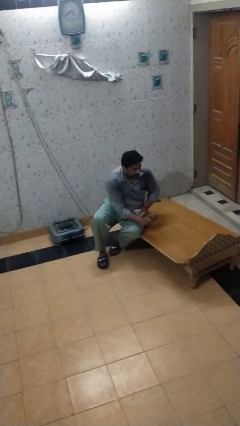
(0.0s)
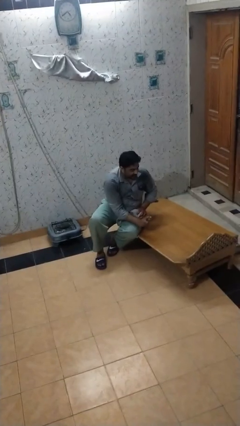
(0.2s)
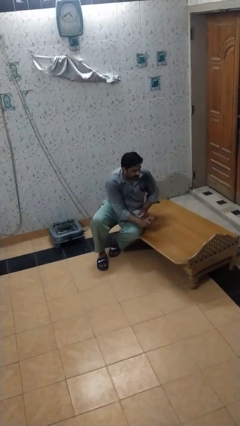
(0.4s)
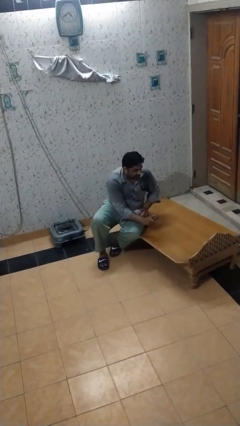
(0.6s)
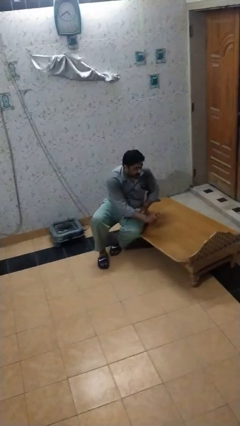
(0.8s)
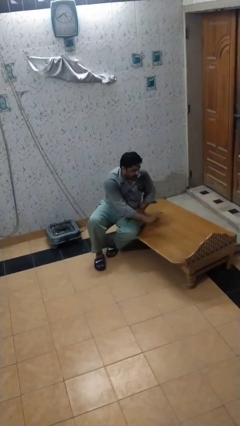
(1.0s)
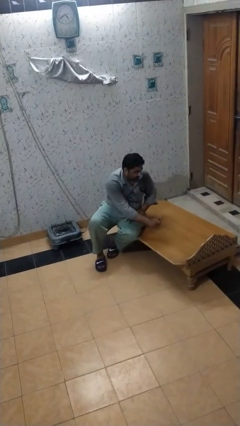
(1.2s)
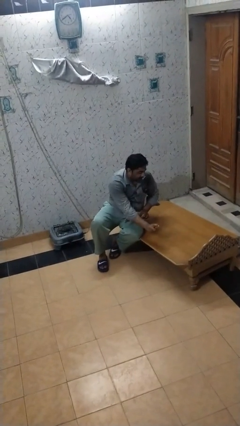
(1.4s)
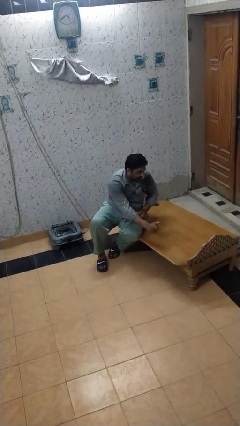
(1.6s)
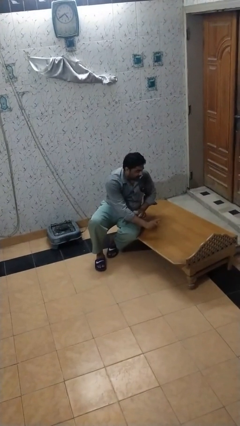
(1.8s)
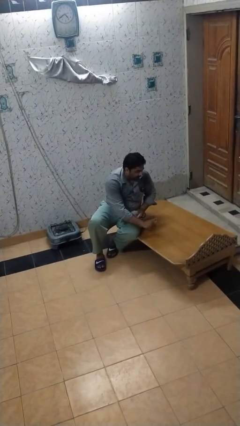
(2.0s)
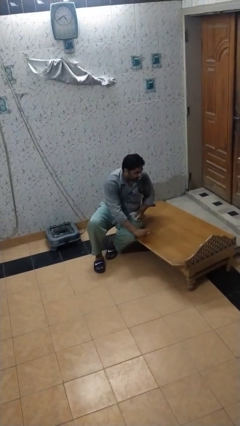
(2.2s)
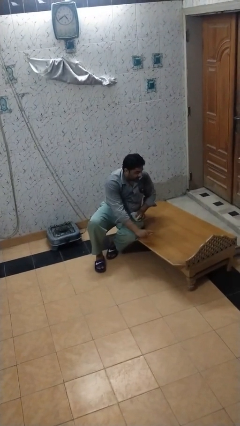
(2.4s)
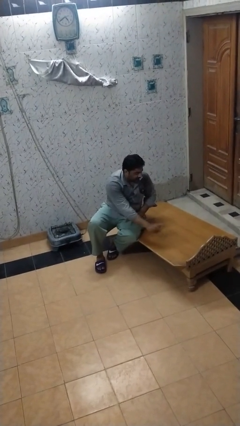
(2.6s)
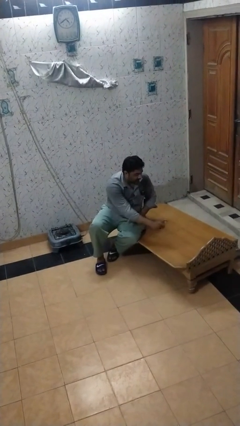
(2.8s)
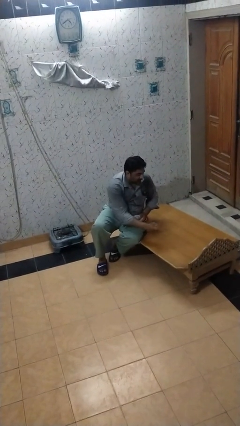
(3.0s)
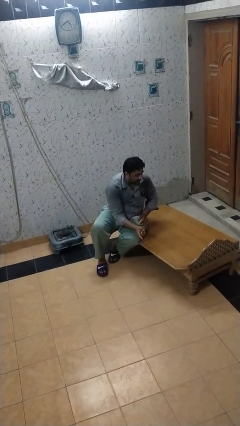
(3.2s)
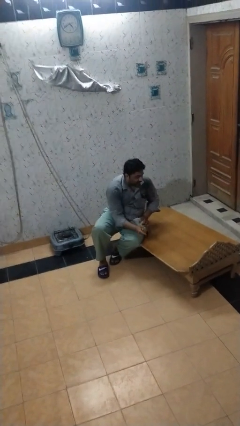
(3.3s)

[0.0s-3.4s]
person sprays from bottle

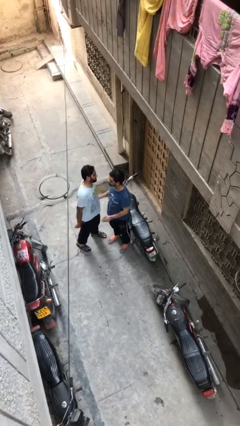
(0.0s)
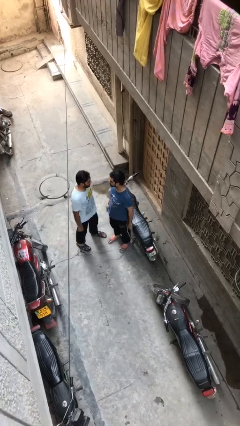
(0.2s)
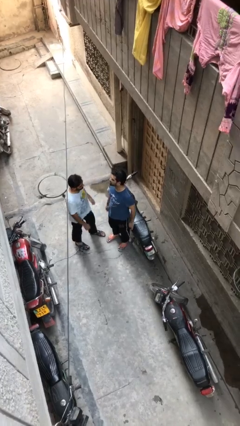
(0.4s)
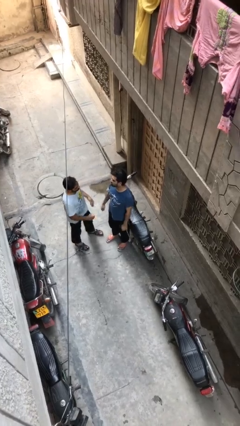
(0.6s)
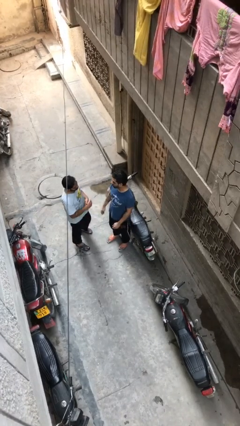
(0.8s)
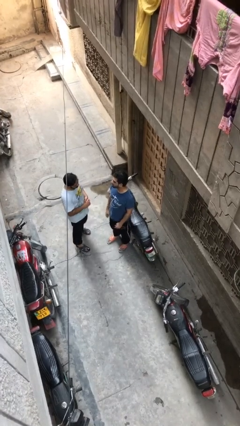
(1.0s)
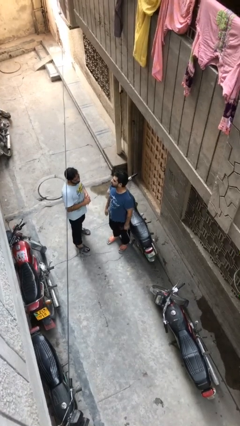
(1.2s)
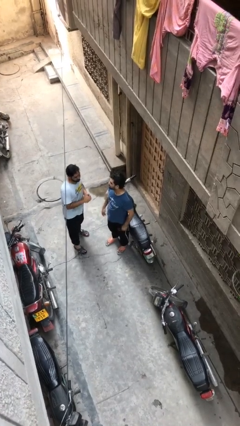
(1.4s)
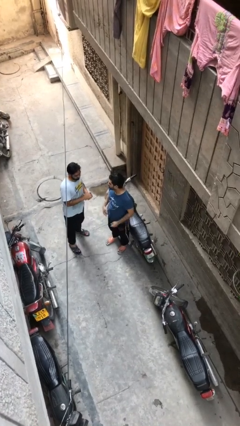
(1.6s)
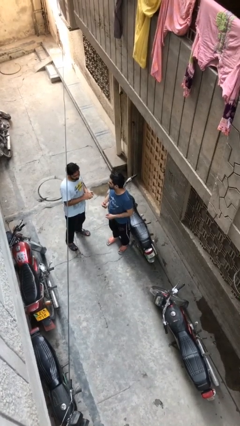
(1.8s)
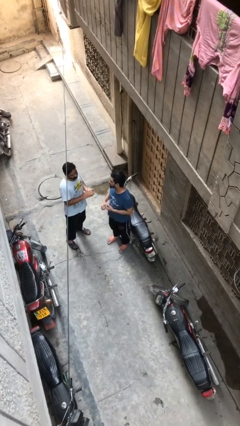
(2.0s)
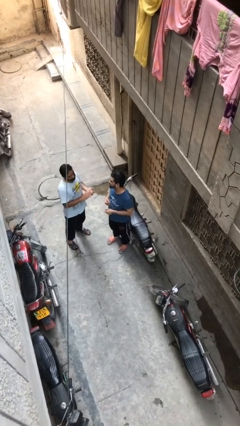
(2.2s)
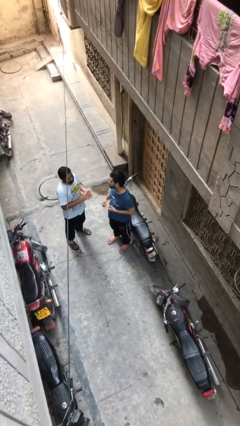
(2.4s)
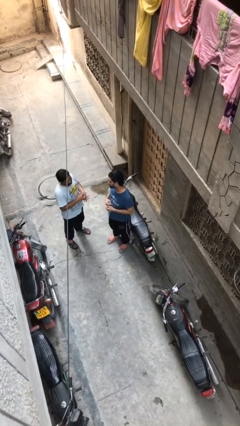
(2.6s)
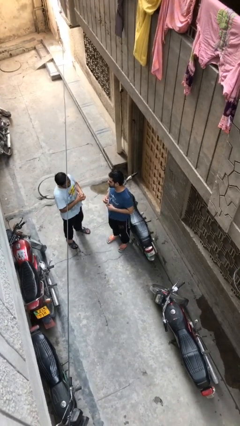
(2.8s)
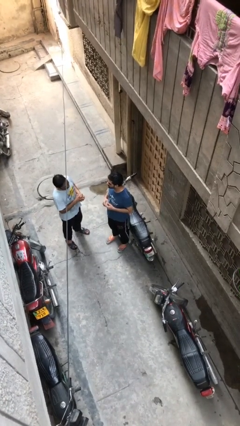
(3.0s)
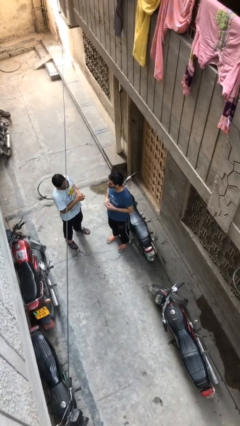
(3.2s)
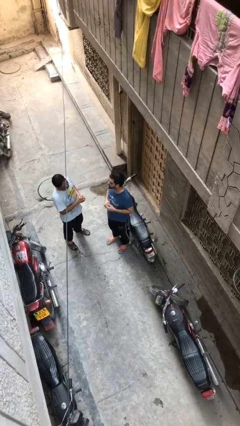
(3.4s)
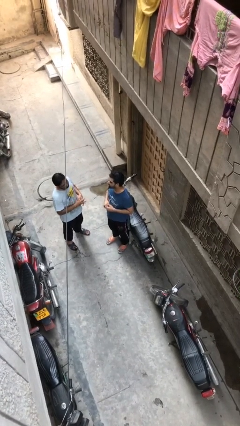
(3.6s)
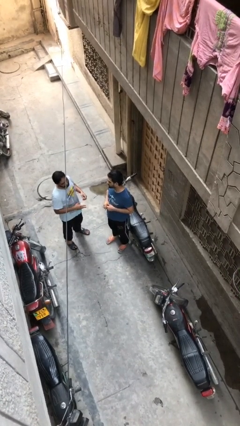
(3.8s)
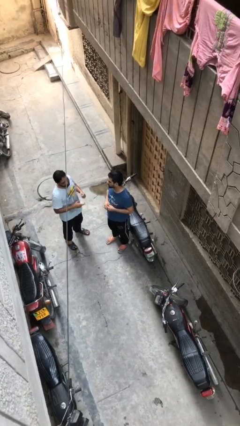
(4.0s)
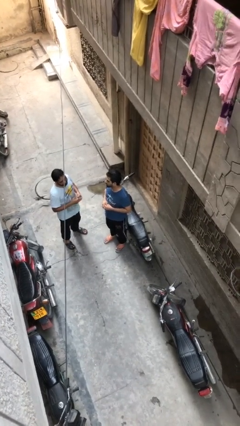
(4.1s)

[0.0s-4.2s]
person talks to person

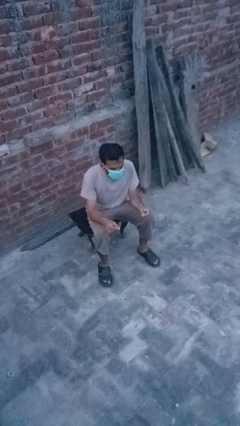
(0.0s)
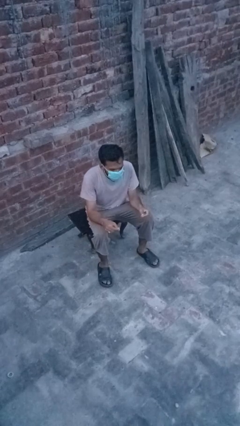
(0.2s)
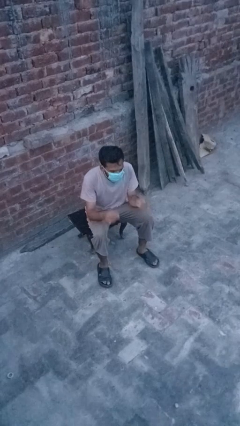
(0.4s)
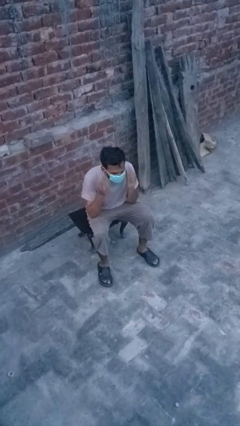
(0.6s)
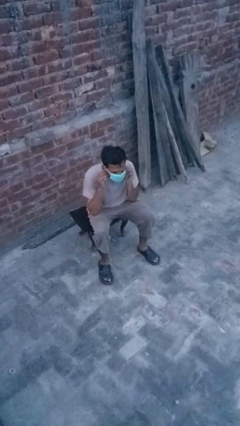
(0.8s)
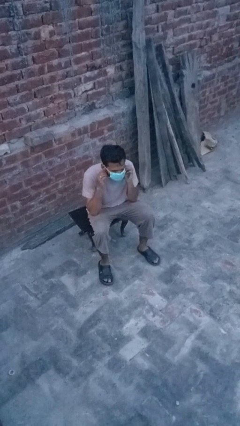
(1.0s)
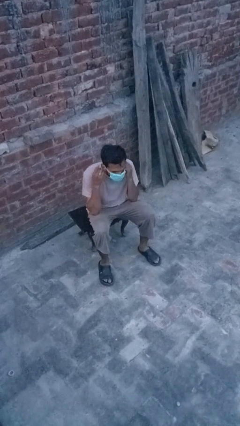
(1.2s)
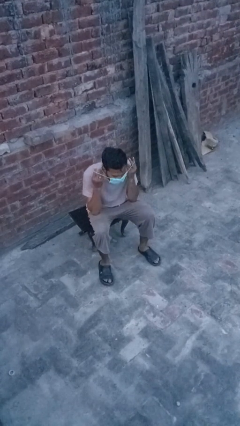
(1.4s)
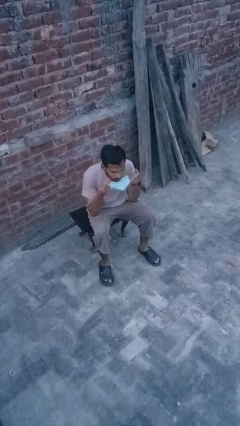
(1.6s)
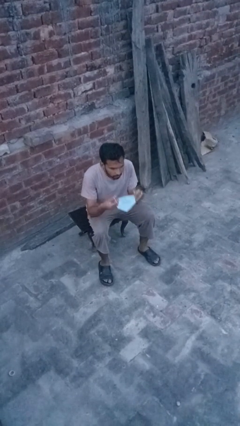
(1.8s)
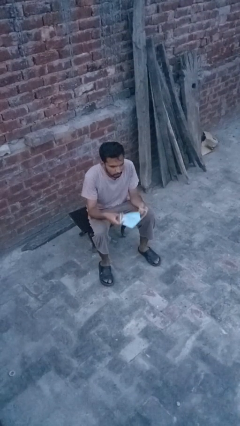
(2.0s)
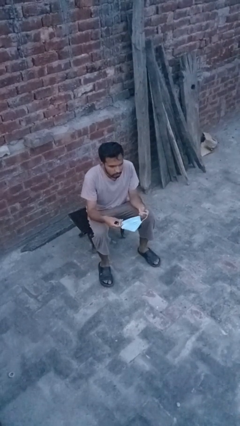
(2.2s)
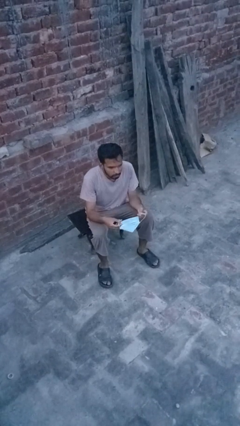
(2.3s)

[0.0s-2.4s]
person takes off facemask

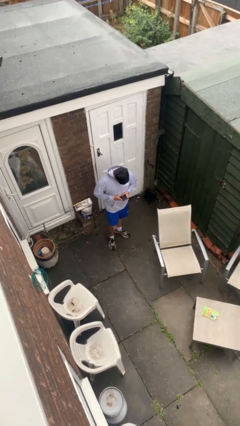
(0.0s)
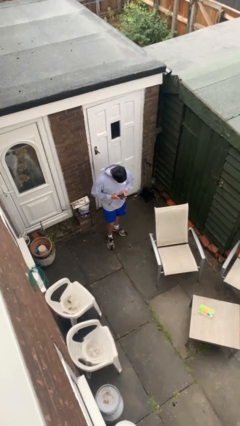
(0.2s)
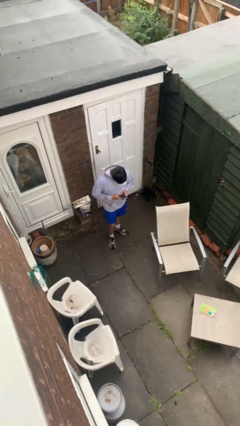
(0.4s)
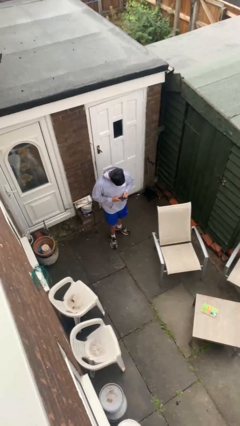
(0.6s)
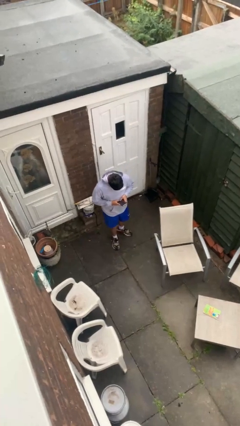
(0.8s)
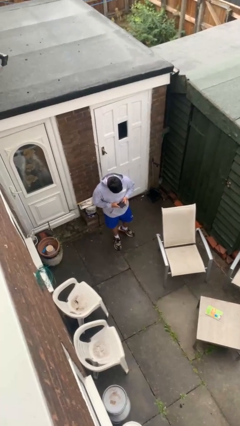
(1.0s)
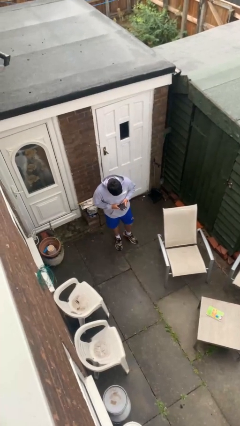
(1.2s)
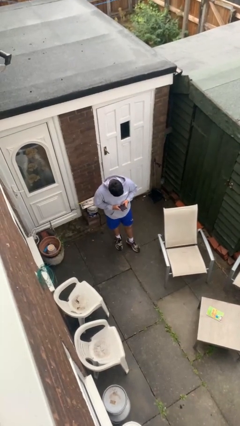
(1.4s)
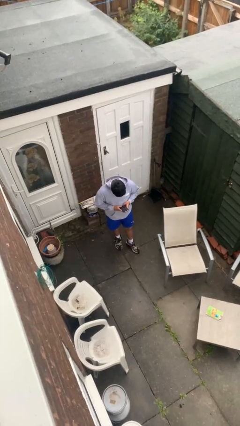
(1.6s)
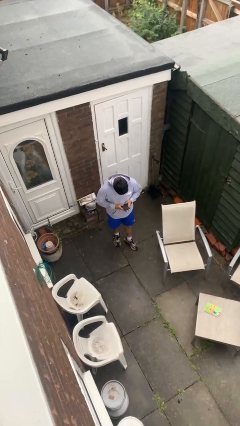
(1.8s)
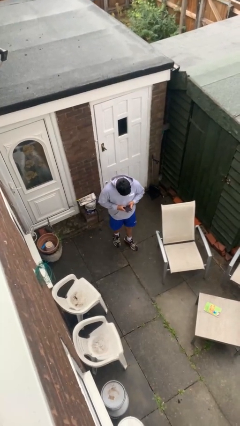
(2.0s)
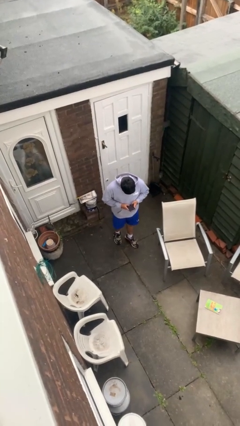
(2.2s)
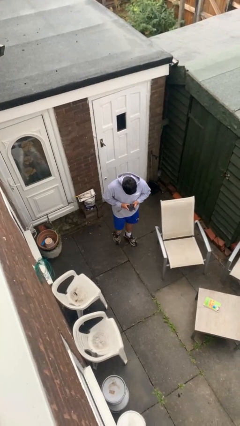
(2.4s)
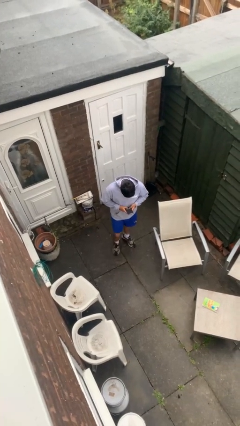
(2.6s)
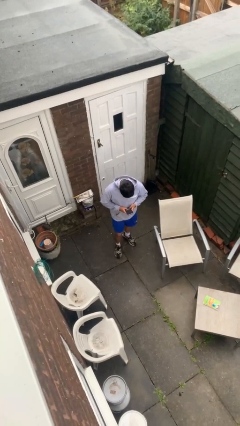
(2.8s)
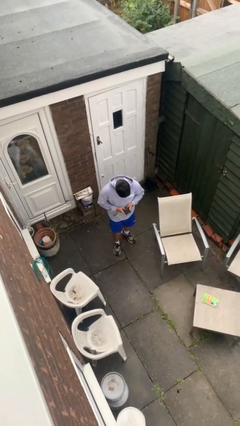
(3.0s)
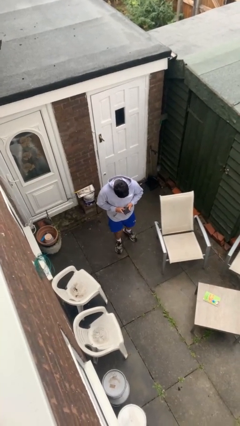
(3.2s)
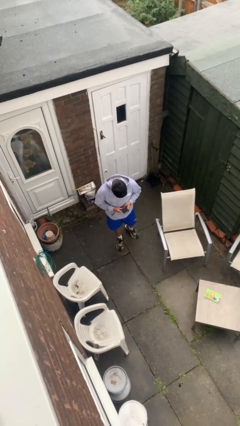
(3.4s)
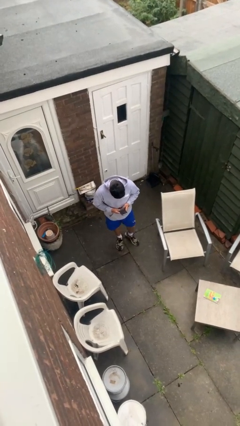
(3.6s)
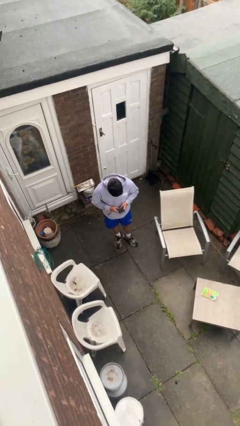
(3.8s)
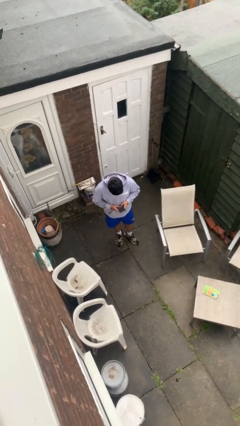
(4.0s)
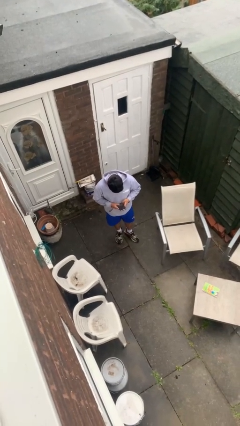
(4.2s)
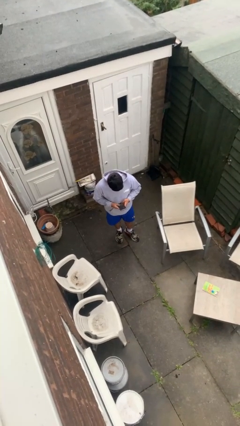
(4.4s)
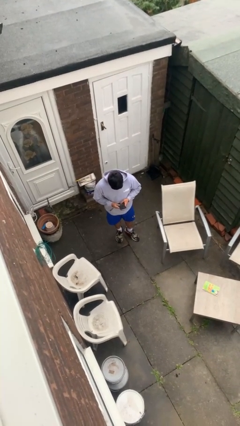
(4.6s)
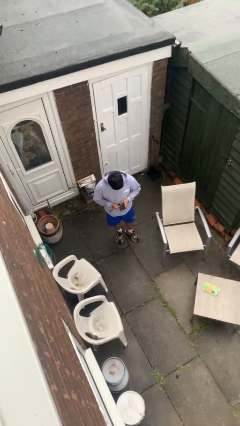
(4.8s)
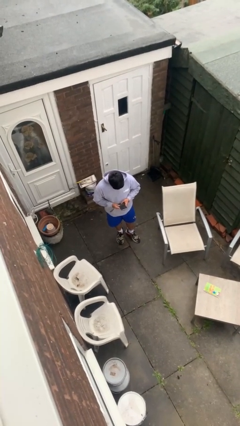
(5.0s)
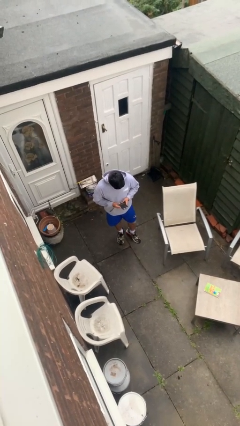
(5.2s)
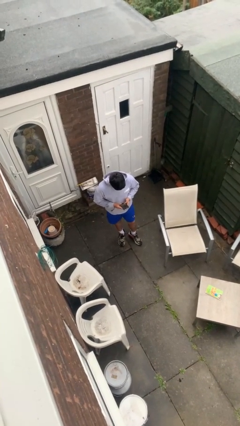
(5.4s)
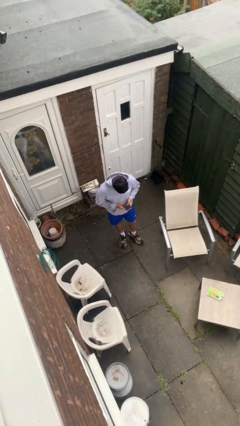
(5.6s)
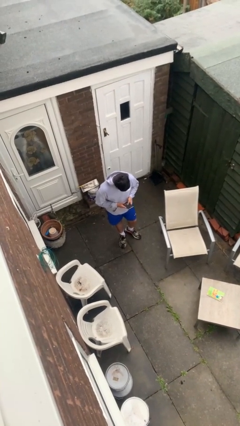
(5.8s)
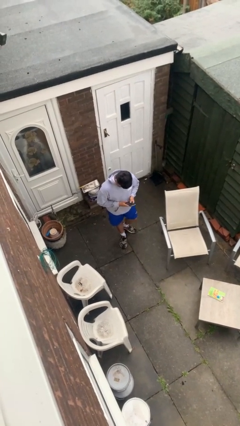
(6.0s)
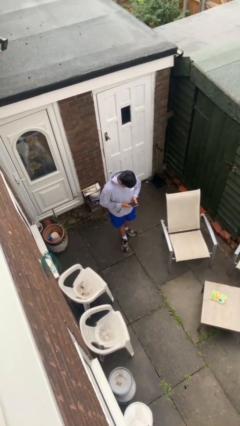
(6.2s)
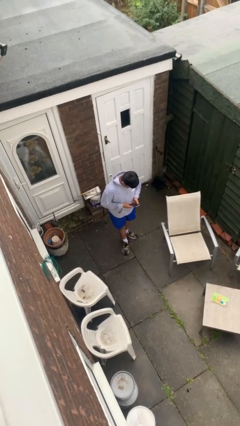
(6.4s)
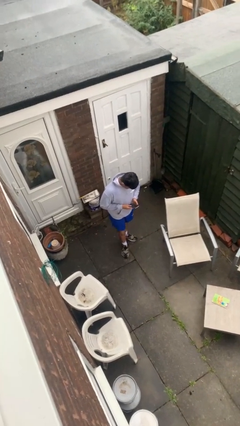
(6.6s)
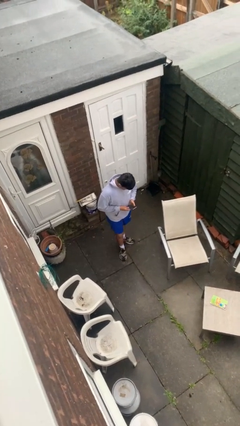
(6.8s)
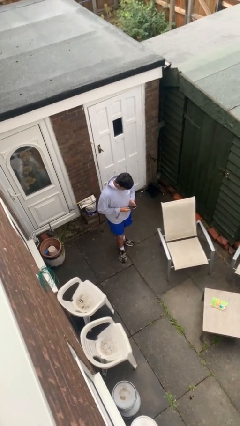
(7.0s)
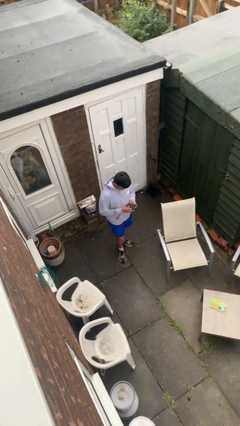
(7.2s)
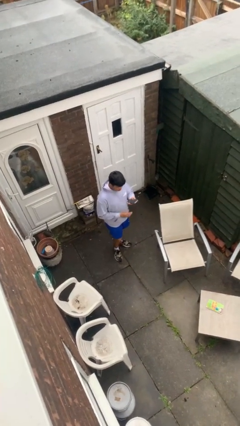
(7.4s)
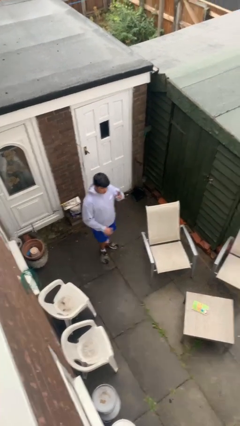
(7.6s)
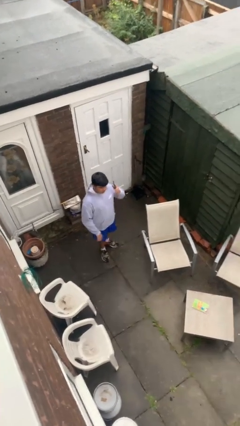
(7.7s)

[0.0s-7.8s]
person texts on phone

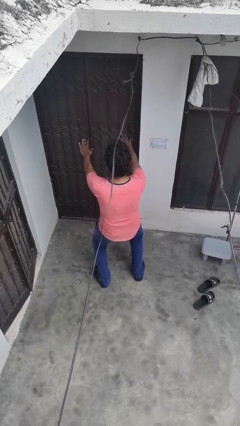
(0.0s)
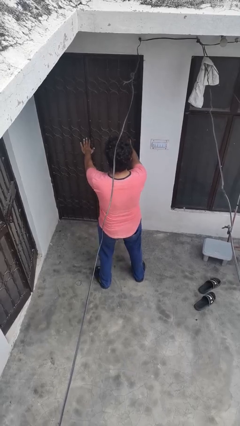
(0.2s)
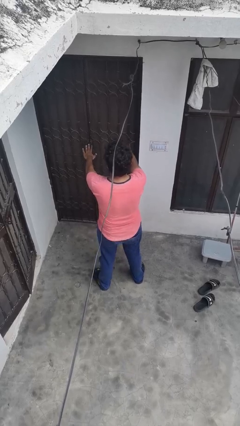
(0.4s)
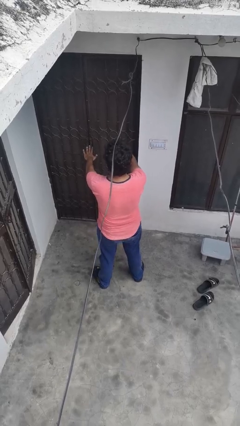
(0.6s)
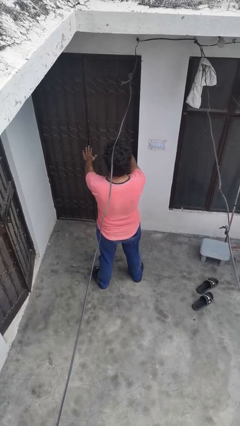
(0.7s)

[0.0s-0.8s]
person stands up
